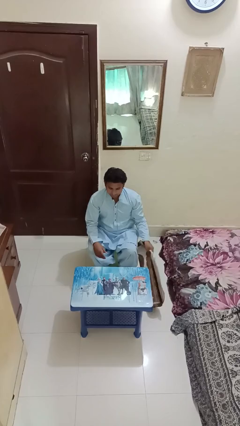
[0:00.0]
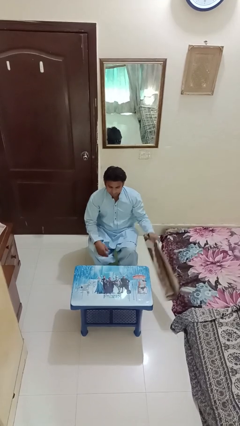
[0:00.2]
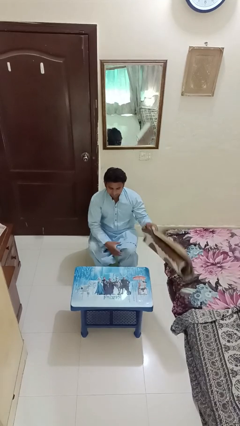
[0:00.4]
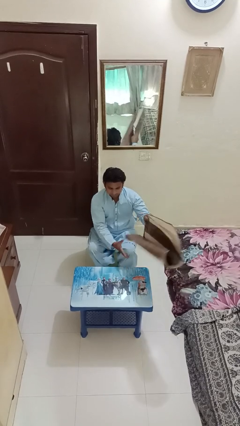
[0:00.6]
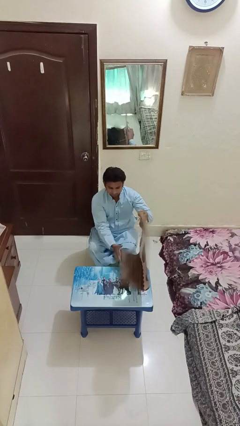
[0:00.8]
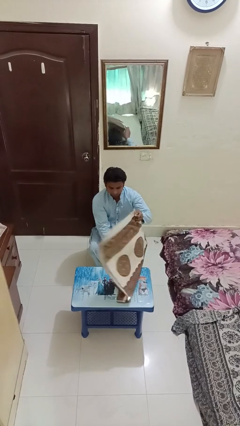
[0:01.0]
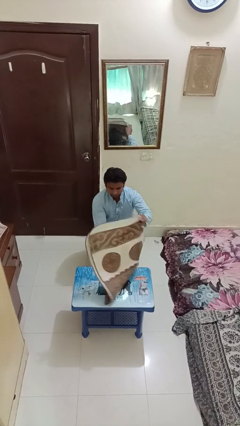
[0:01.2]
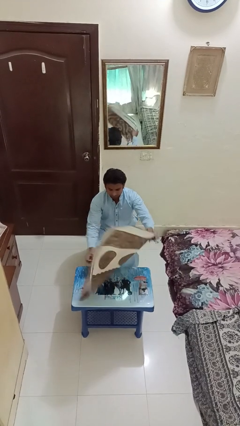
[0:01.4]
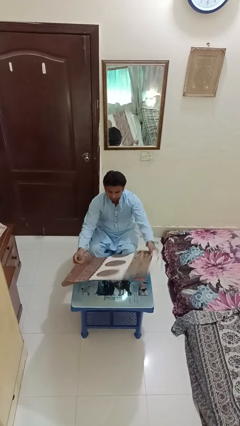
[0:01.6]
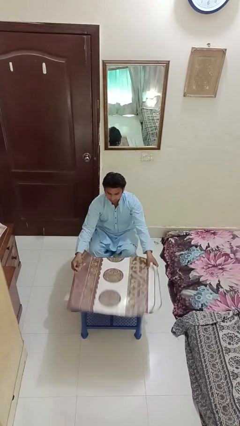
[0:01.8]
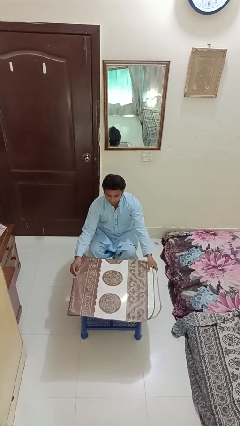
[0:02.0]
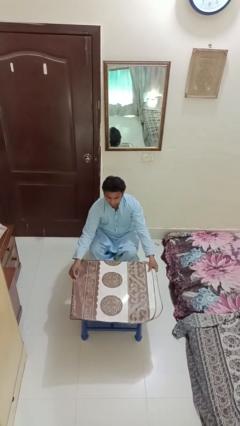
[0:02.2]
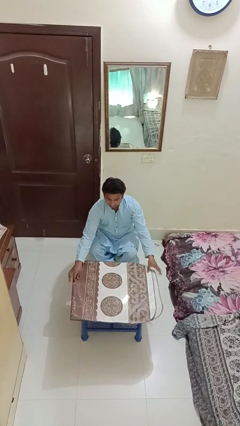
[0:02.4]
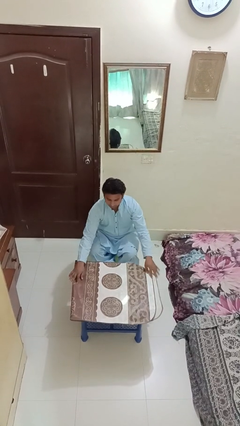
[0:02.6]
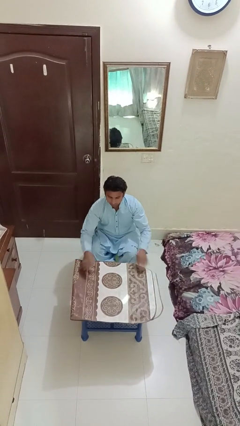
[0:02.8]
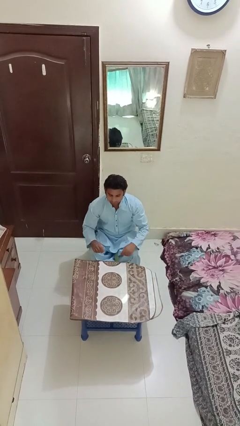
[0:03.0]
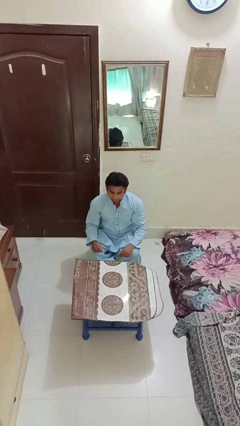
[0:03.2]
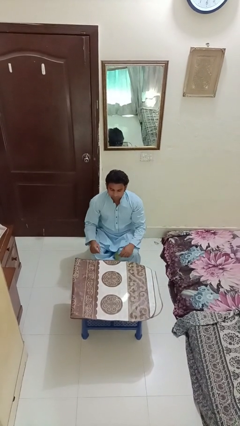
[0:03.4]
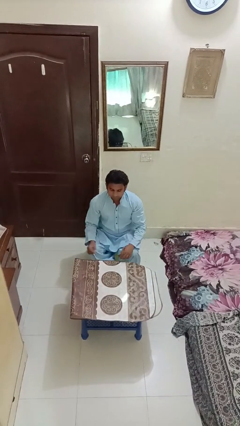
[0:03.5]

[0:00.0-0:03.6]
person spreads tablecloth

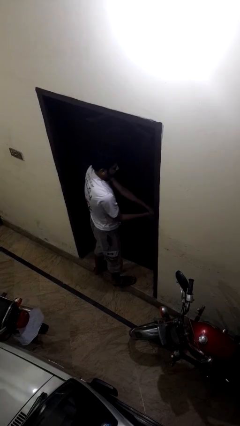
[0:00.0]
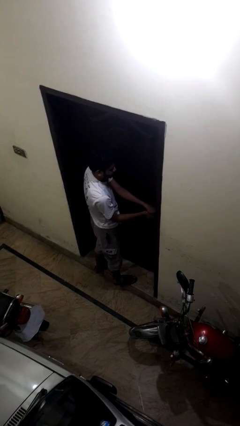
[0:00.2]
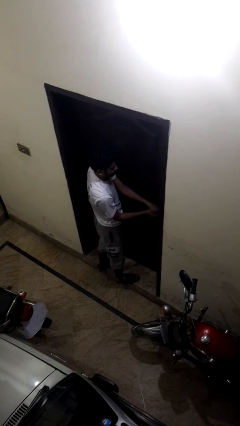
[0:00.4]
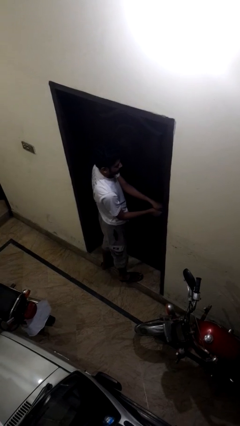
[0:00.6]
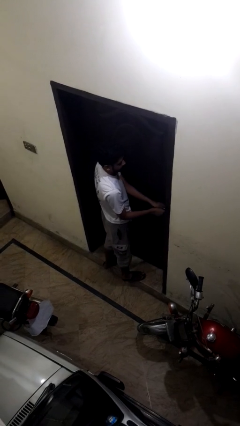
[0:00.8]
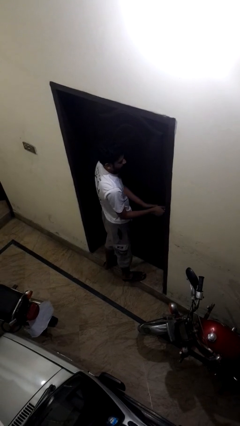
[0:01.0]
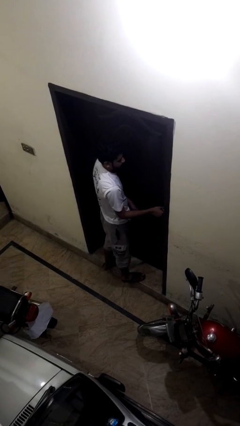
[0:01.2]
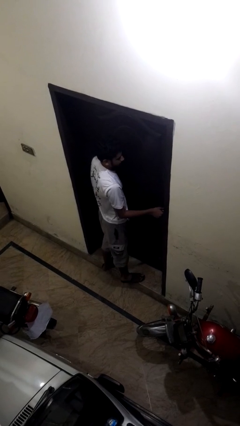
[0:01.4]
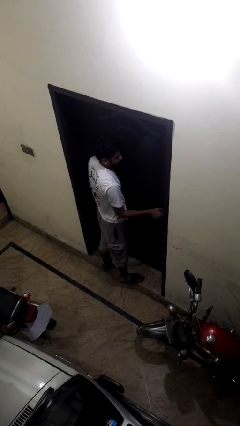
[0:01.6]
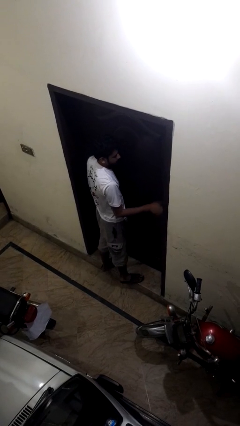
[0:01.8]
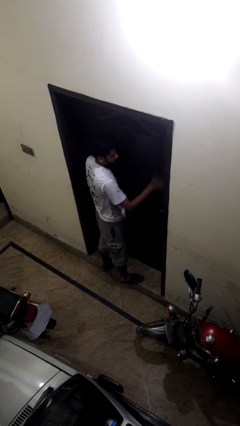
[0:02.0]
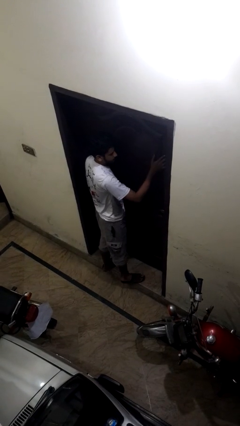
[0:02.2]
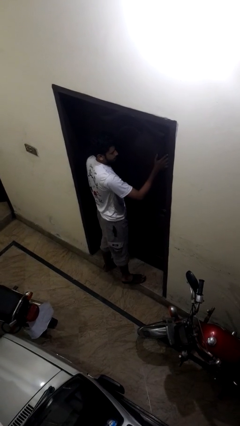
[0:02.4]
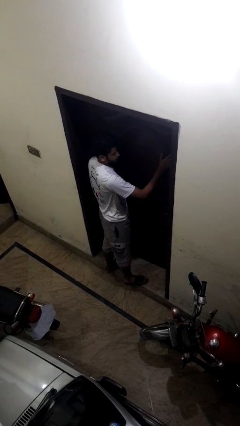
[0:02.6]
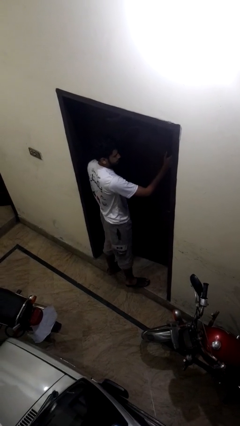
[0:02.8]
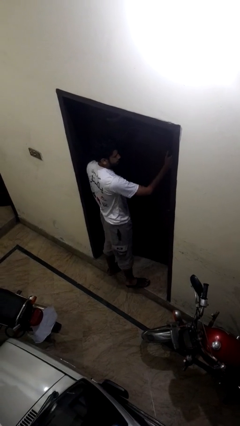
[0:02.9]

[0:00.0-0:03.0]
person closes facility door

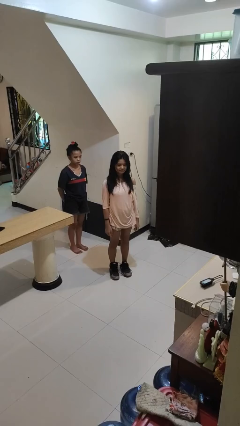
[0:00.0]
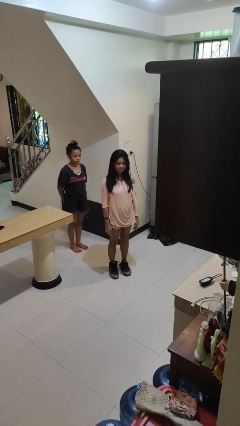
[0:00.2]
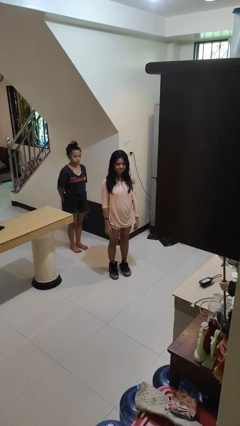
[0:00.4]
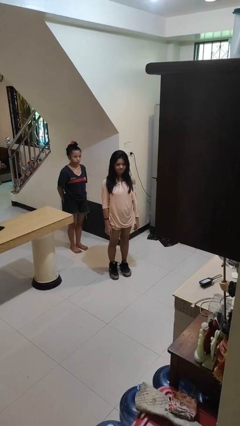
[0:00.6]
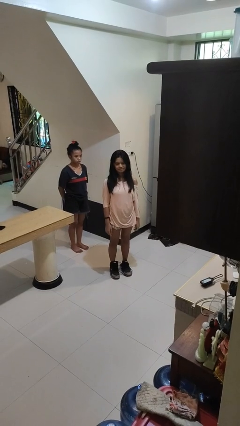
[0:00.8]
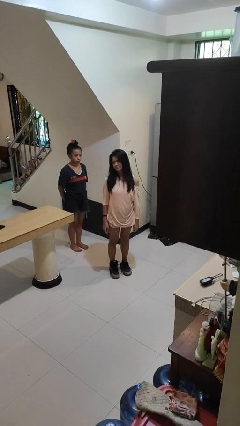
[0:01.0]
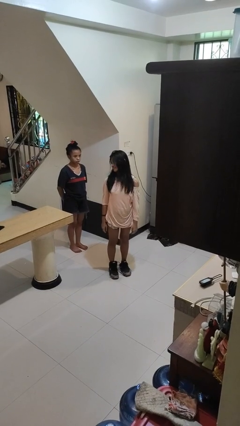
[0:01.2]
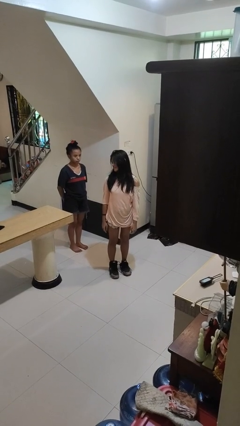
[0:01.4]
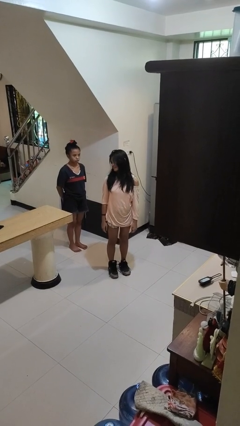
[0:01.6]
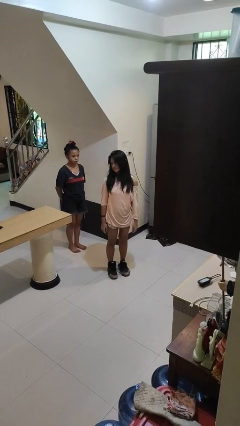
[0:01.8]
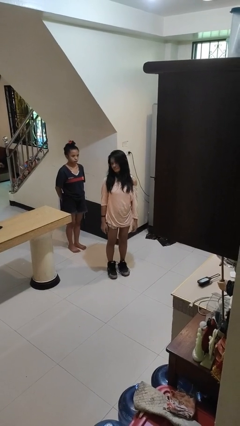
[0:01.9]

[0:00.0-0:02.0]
person looks over shoulder

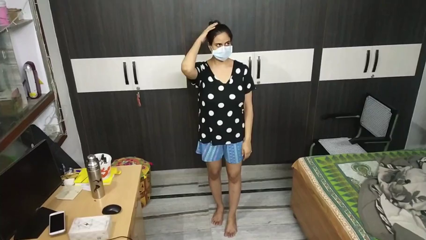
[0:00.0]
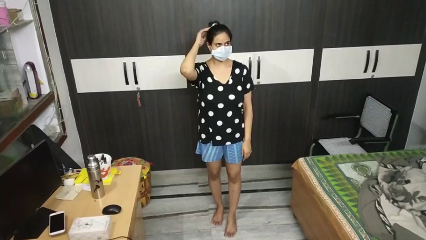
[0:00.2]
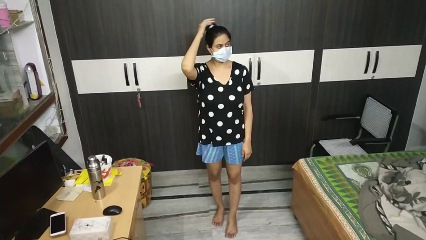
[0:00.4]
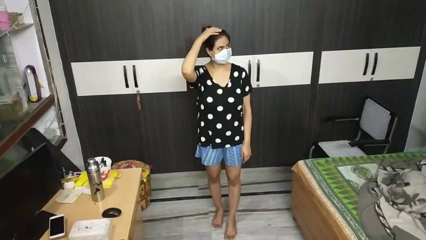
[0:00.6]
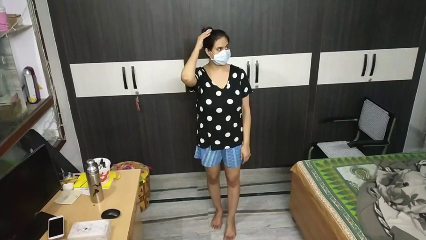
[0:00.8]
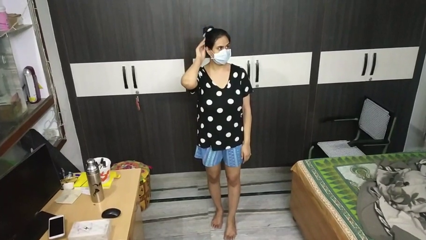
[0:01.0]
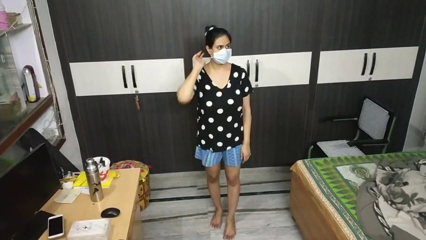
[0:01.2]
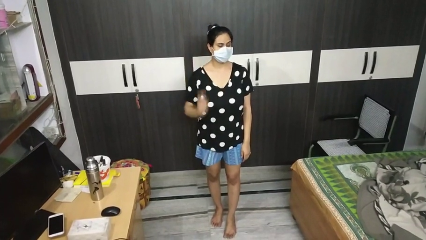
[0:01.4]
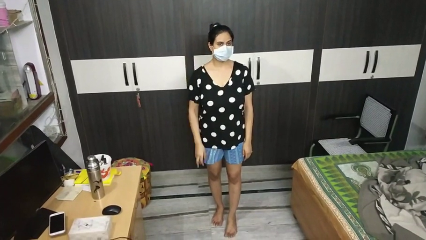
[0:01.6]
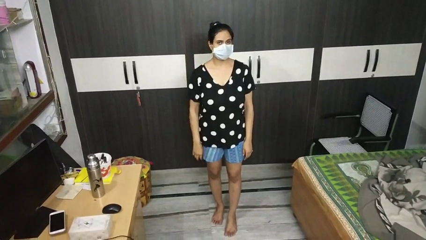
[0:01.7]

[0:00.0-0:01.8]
person pats head

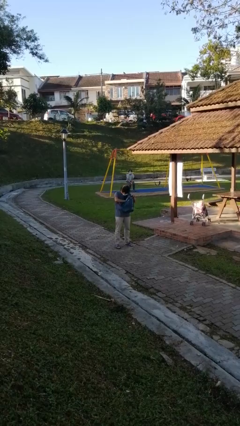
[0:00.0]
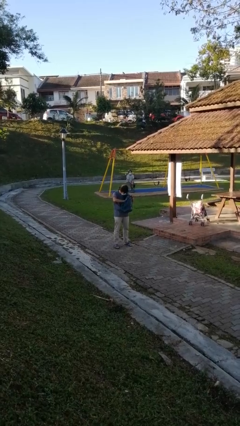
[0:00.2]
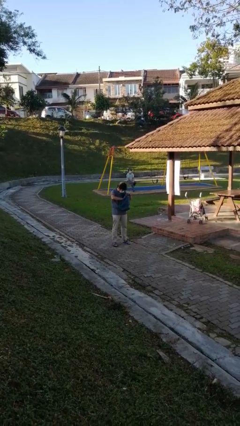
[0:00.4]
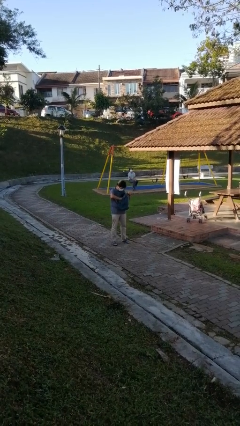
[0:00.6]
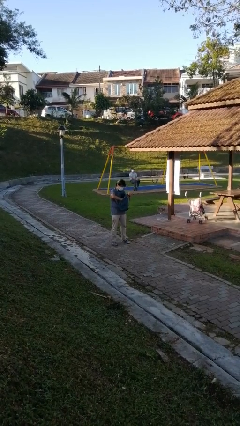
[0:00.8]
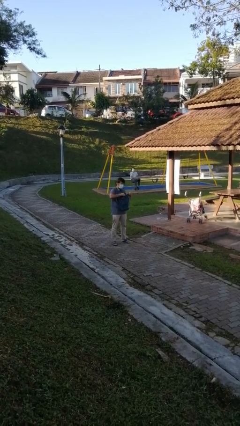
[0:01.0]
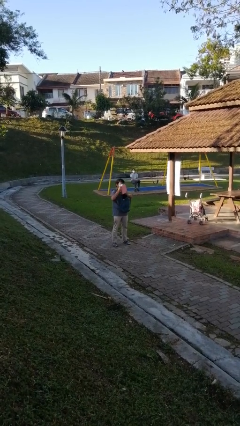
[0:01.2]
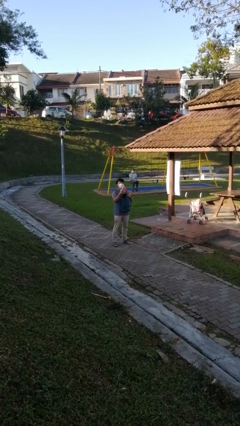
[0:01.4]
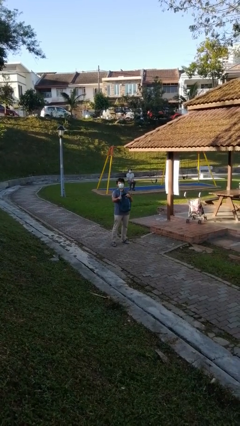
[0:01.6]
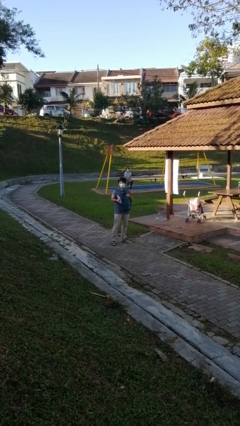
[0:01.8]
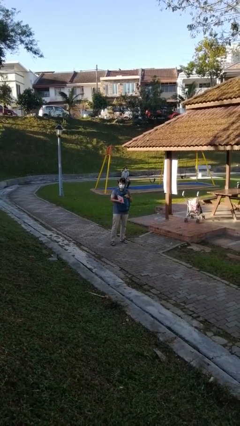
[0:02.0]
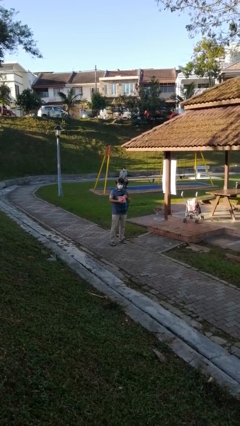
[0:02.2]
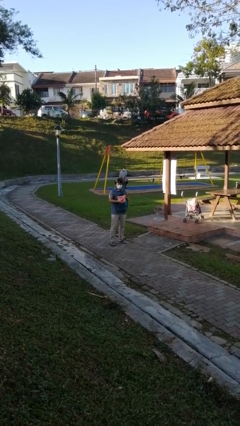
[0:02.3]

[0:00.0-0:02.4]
person takes object from backpack

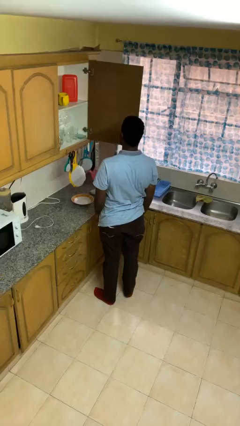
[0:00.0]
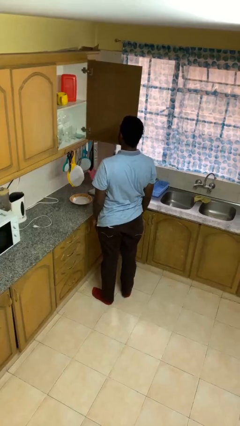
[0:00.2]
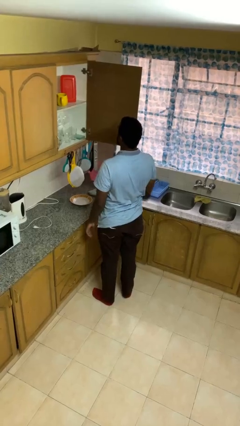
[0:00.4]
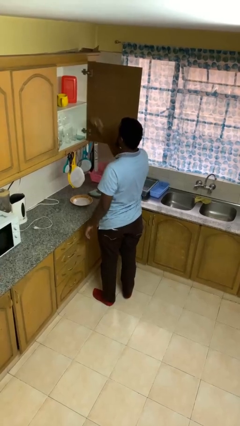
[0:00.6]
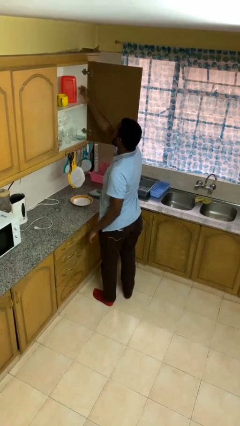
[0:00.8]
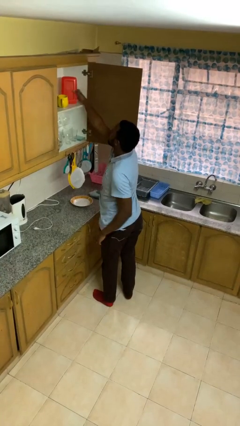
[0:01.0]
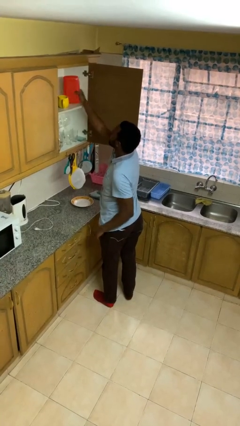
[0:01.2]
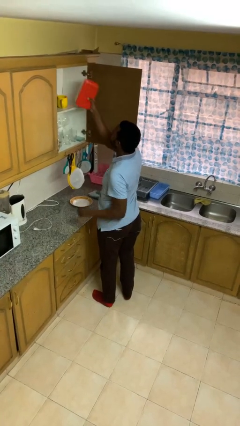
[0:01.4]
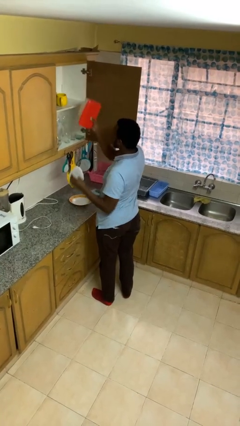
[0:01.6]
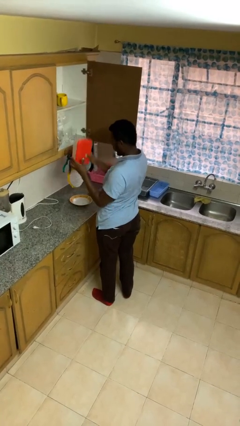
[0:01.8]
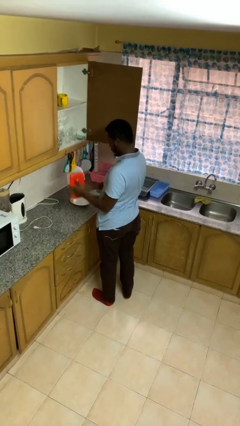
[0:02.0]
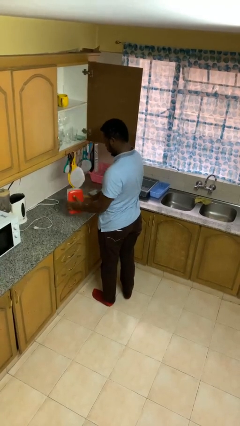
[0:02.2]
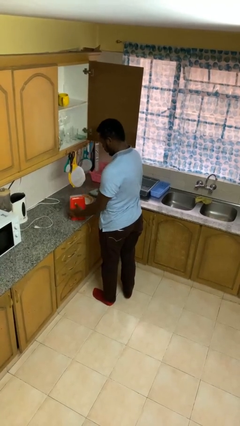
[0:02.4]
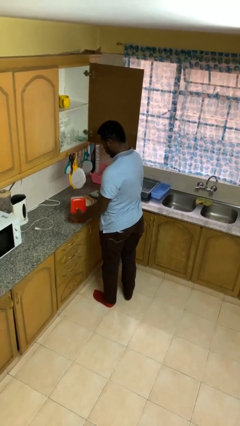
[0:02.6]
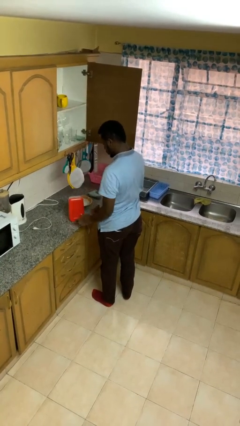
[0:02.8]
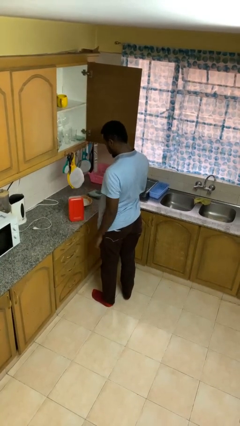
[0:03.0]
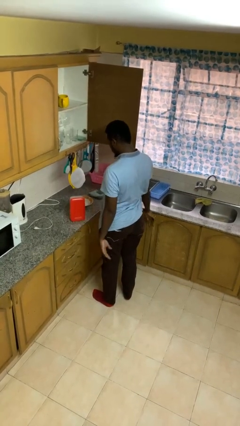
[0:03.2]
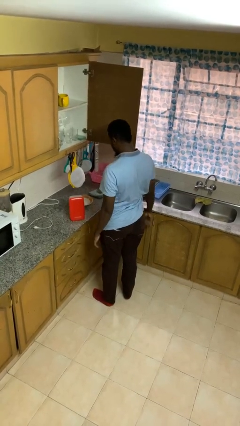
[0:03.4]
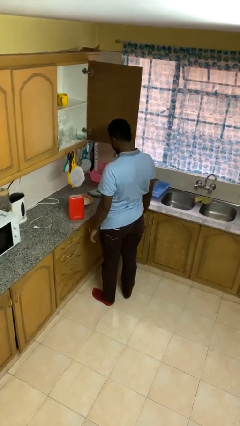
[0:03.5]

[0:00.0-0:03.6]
person takes object from cabinet

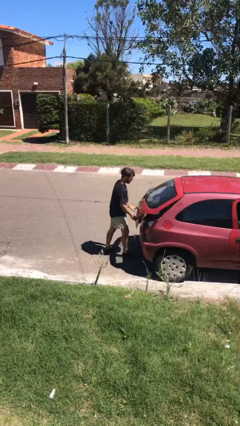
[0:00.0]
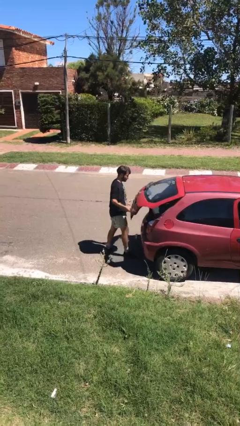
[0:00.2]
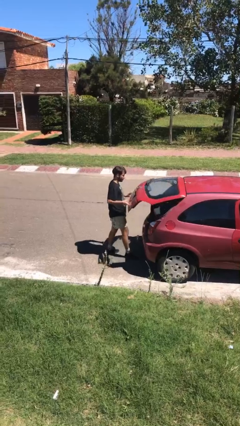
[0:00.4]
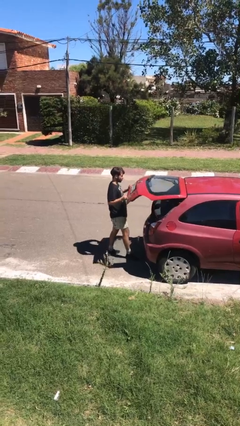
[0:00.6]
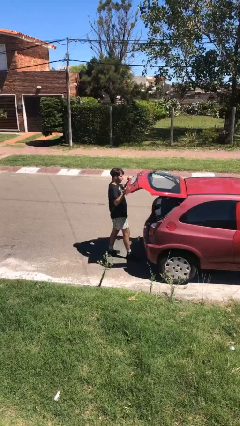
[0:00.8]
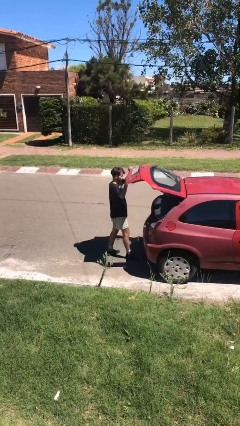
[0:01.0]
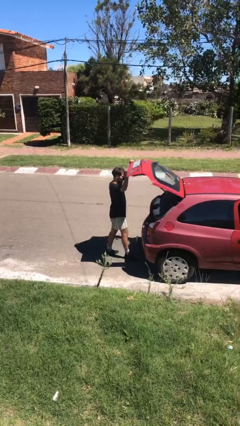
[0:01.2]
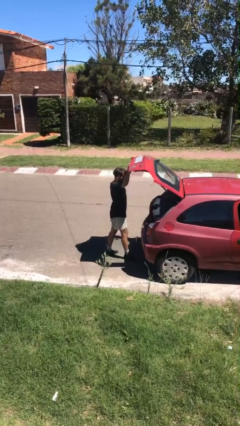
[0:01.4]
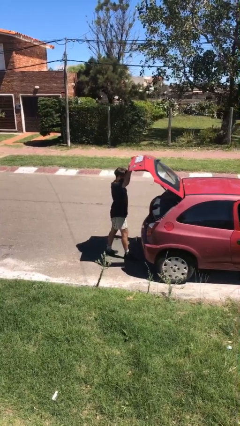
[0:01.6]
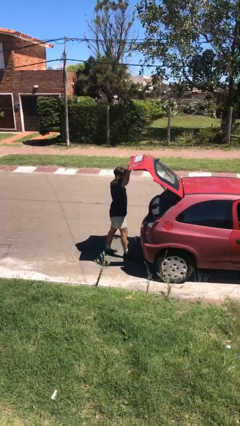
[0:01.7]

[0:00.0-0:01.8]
person opens car trunk
